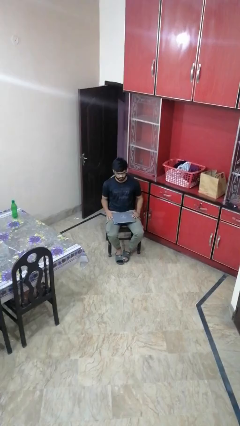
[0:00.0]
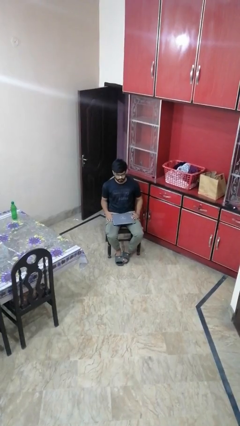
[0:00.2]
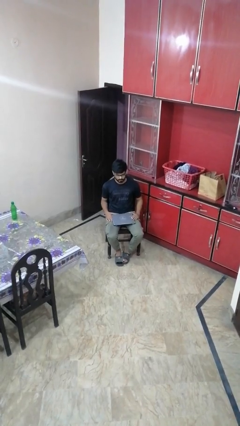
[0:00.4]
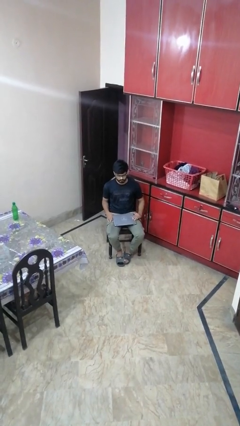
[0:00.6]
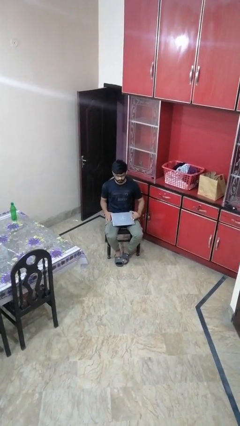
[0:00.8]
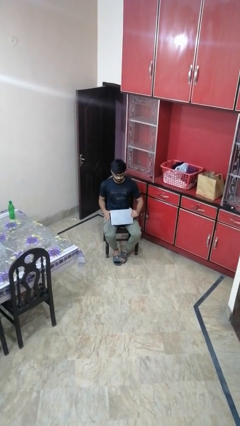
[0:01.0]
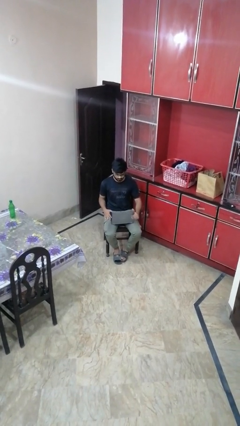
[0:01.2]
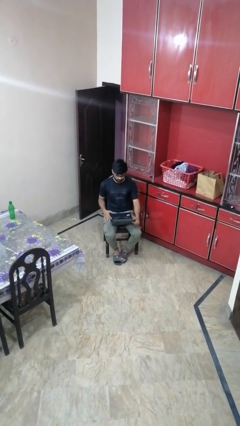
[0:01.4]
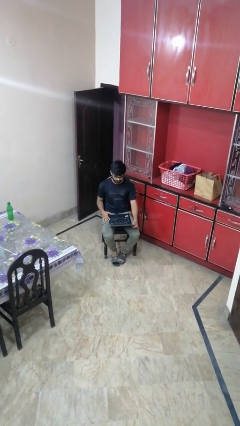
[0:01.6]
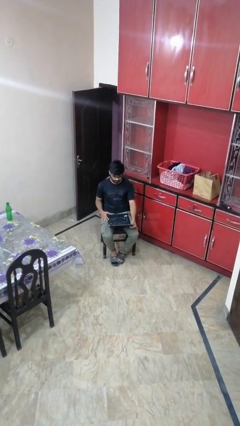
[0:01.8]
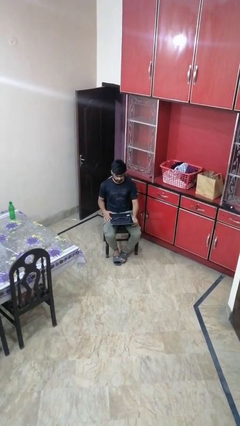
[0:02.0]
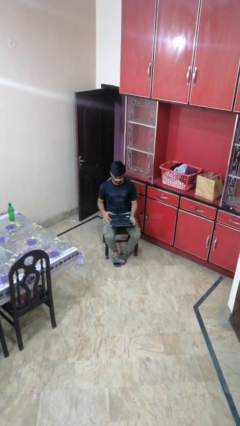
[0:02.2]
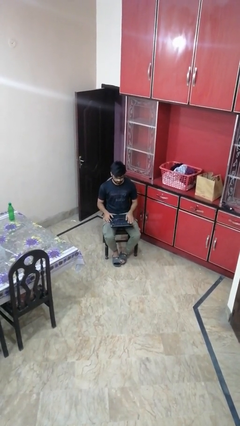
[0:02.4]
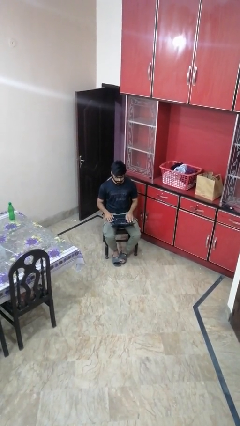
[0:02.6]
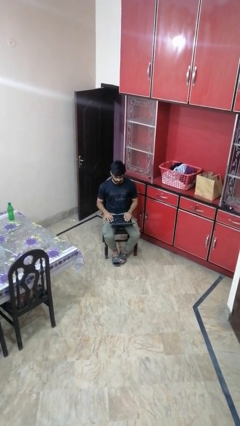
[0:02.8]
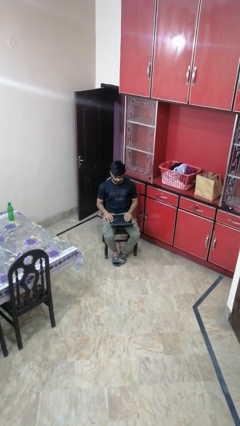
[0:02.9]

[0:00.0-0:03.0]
person opens laptop

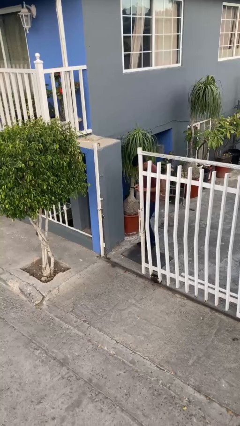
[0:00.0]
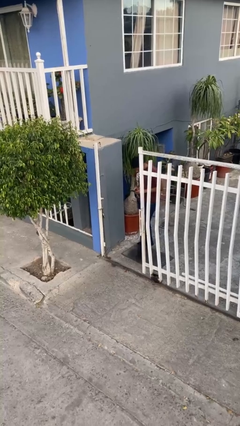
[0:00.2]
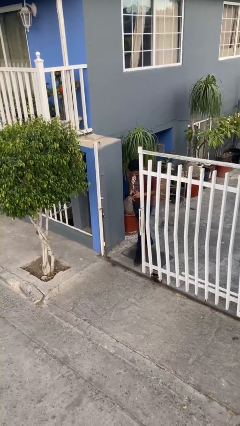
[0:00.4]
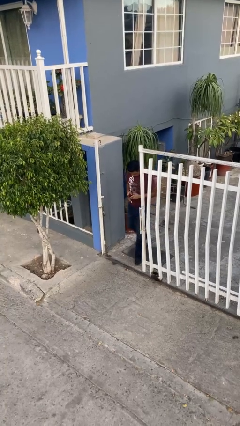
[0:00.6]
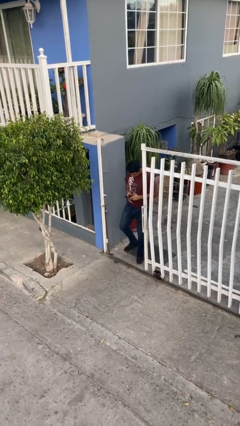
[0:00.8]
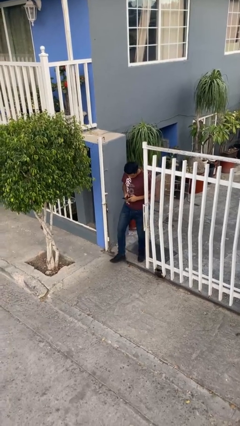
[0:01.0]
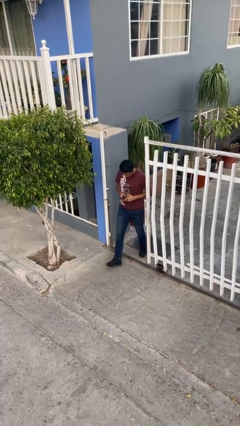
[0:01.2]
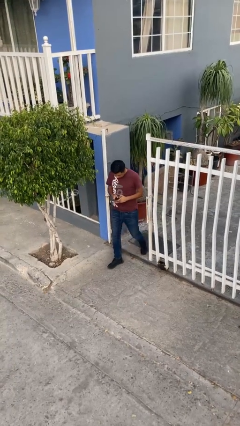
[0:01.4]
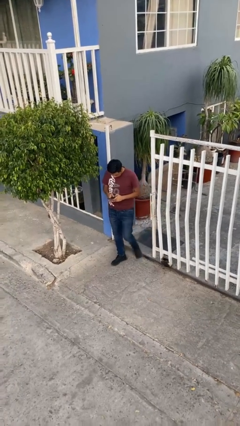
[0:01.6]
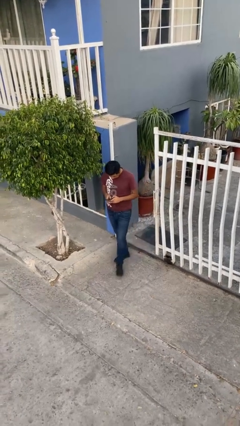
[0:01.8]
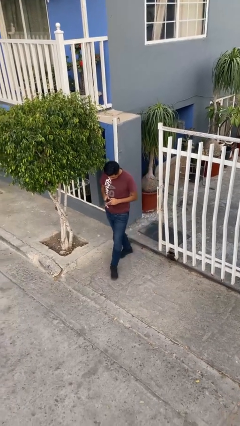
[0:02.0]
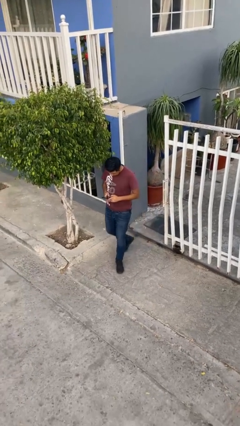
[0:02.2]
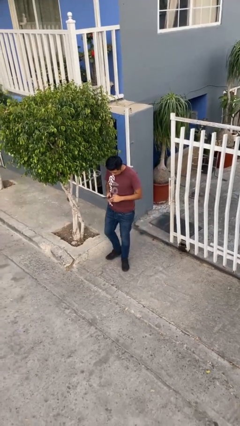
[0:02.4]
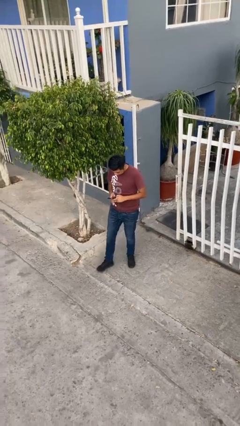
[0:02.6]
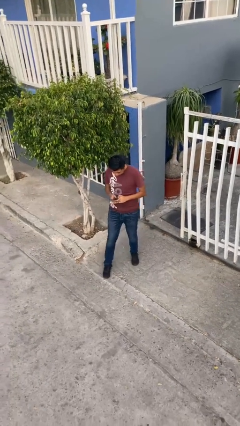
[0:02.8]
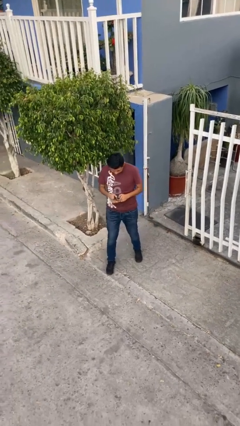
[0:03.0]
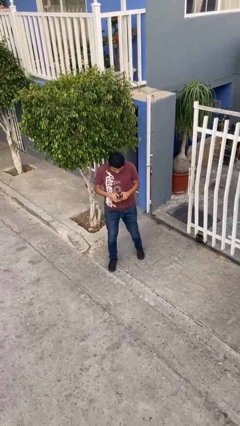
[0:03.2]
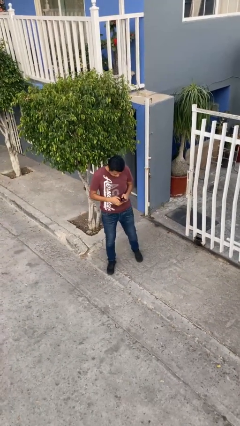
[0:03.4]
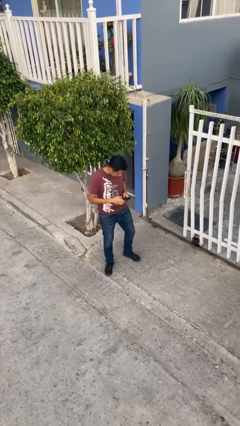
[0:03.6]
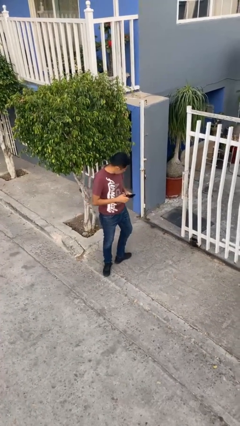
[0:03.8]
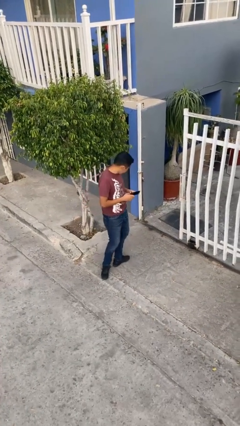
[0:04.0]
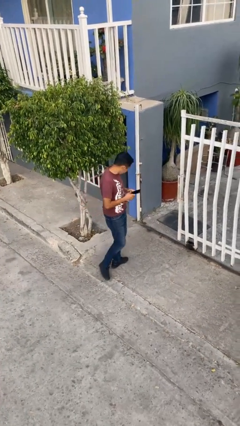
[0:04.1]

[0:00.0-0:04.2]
person enters scene through structure

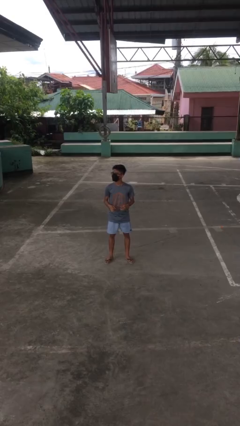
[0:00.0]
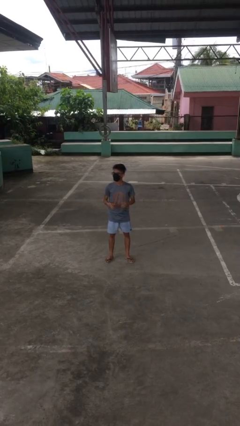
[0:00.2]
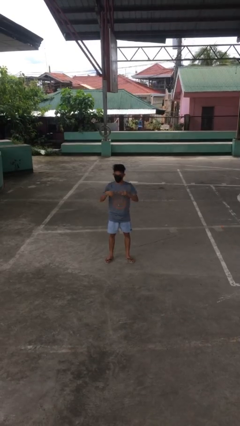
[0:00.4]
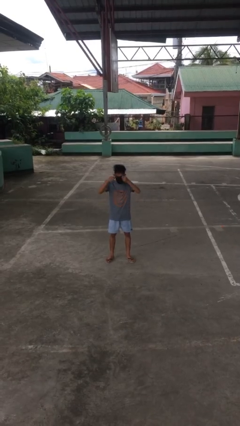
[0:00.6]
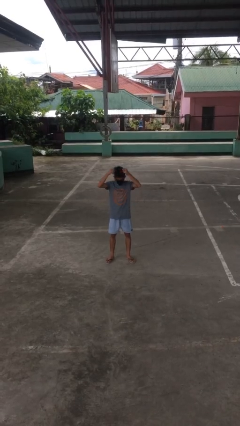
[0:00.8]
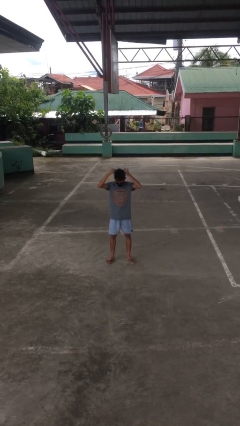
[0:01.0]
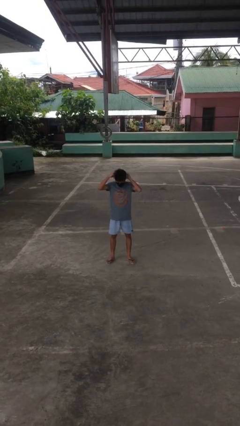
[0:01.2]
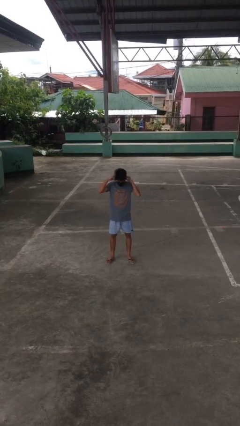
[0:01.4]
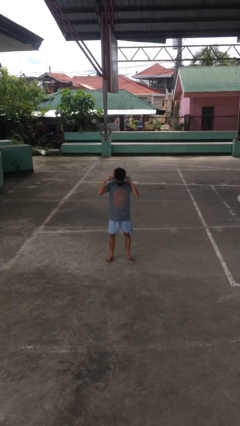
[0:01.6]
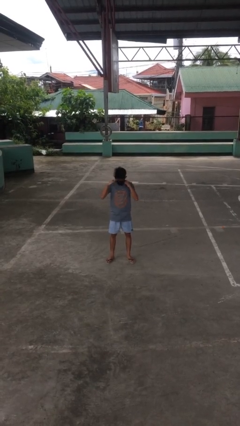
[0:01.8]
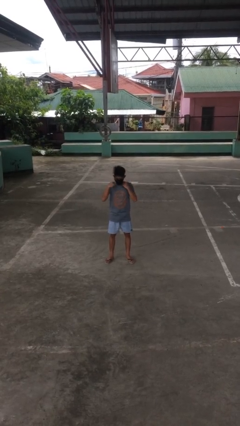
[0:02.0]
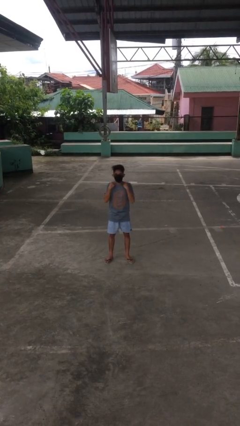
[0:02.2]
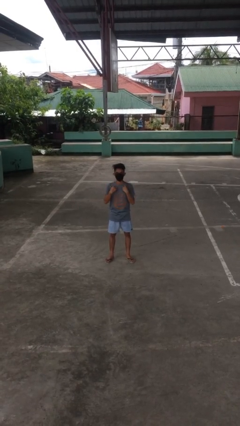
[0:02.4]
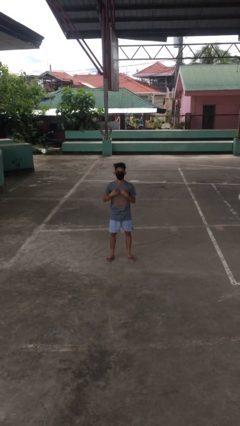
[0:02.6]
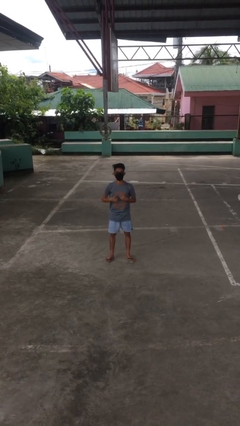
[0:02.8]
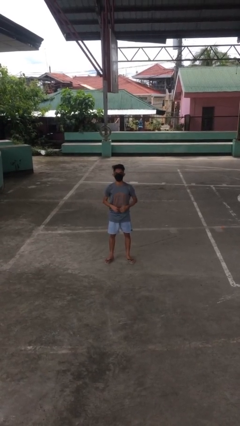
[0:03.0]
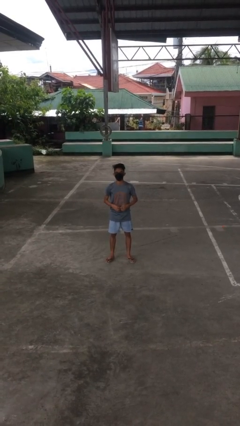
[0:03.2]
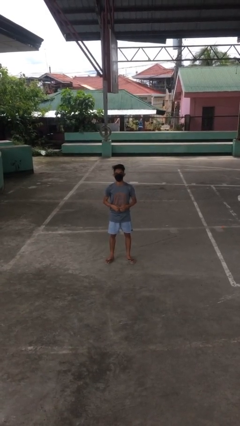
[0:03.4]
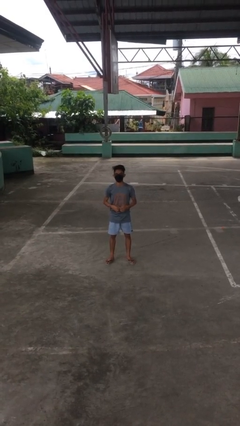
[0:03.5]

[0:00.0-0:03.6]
person puts on necklace

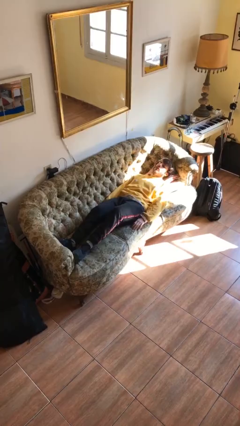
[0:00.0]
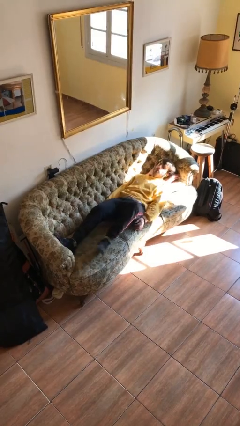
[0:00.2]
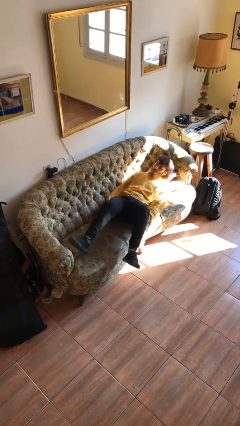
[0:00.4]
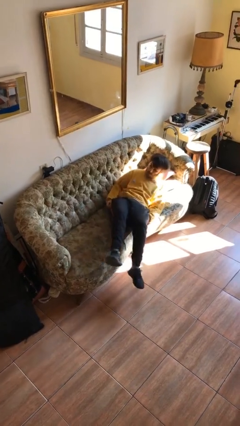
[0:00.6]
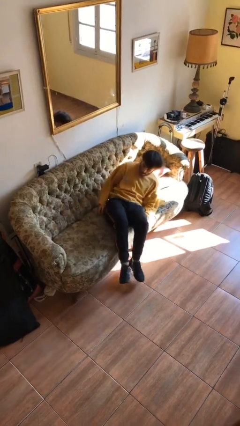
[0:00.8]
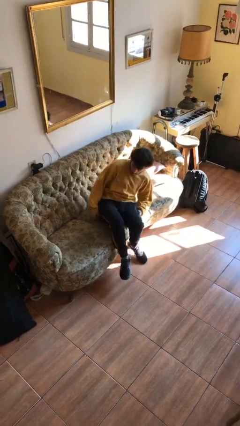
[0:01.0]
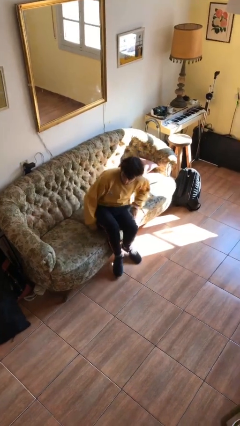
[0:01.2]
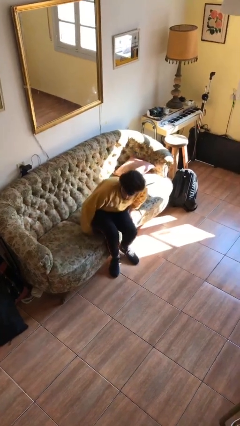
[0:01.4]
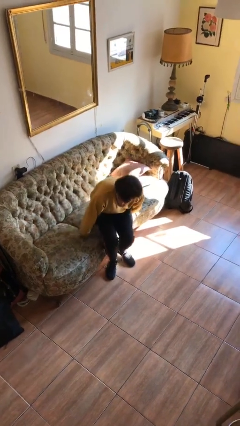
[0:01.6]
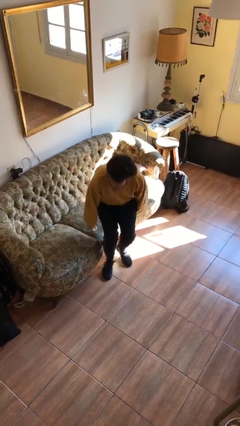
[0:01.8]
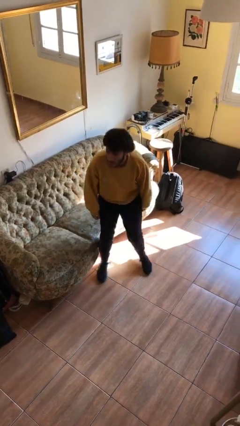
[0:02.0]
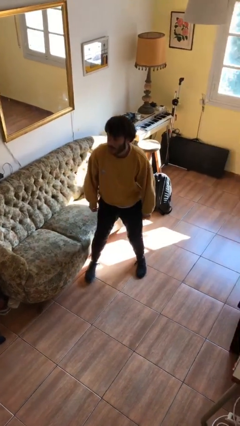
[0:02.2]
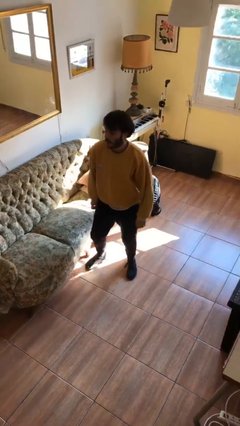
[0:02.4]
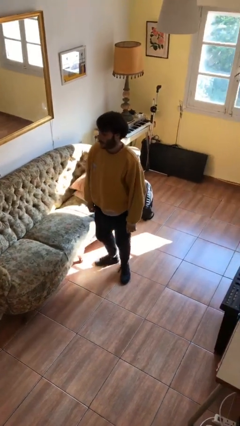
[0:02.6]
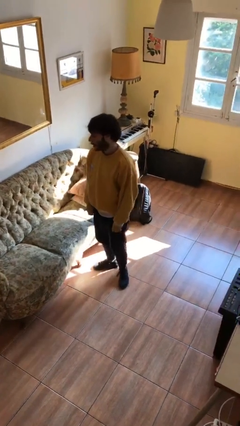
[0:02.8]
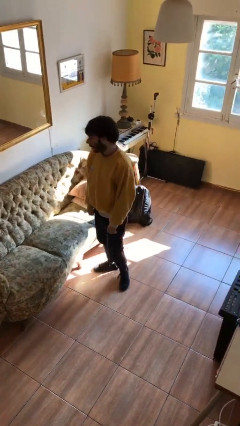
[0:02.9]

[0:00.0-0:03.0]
person stands up

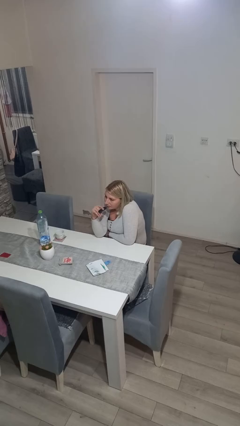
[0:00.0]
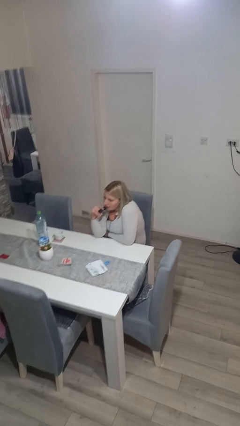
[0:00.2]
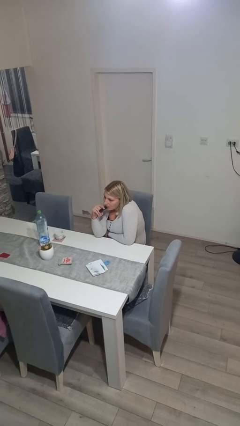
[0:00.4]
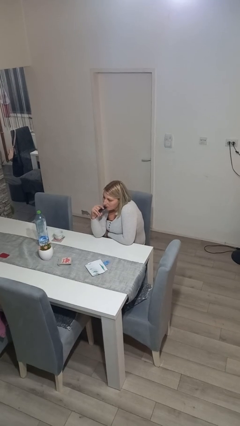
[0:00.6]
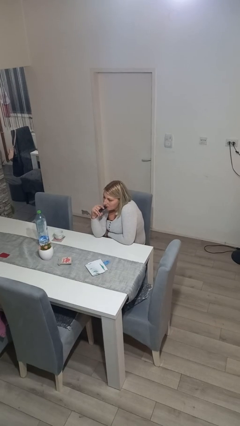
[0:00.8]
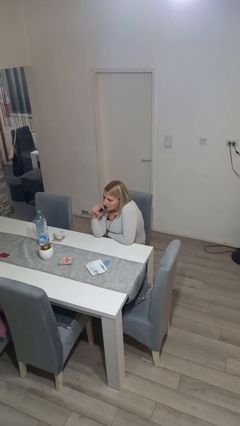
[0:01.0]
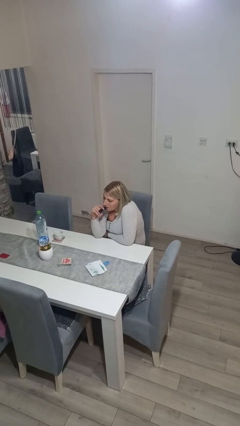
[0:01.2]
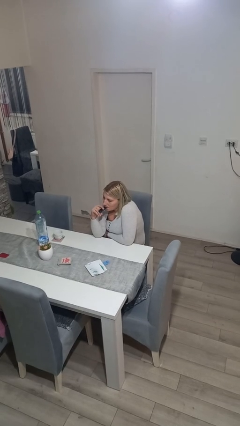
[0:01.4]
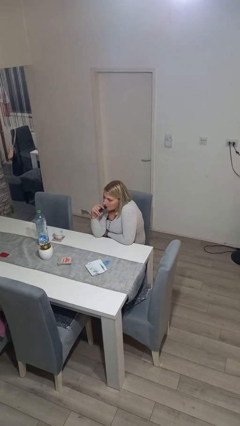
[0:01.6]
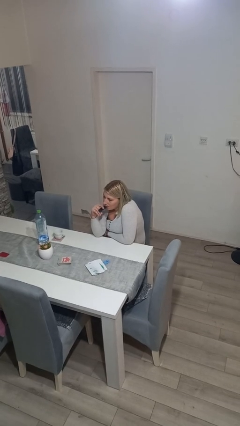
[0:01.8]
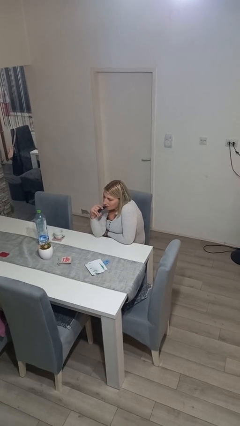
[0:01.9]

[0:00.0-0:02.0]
person vapes

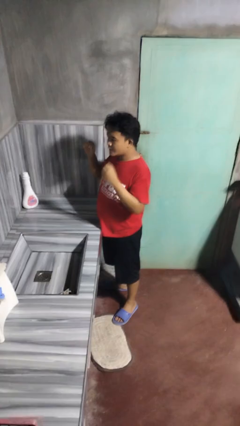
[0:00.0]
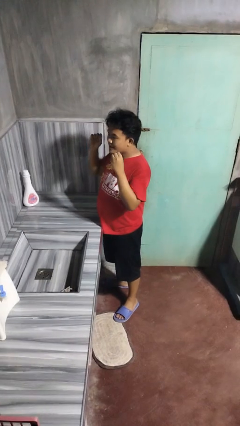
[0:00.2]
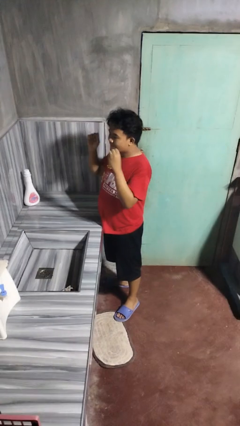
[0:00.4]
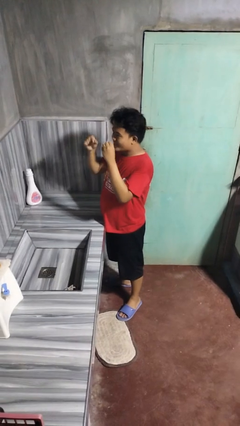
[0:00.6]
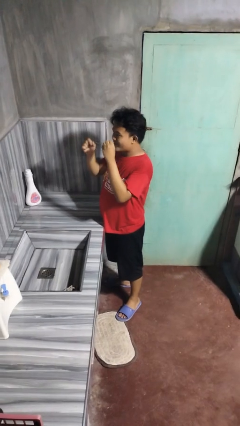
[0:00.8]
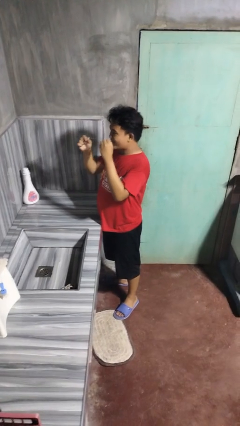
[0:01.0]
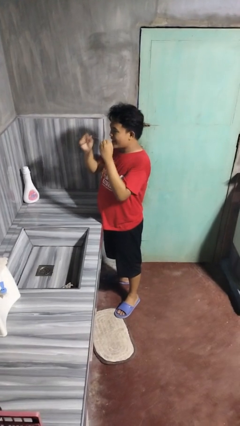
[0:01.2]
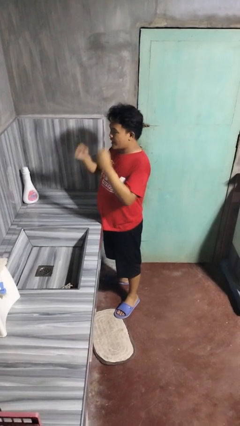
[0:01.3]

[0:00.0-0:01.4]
person flosses

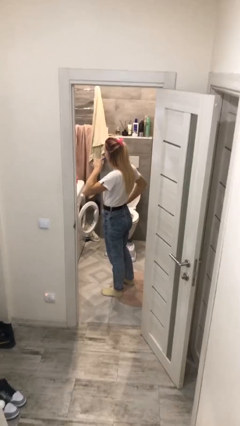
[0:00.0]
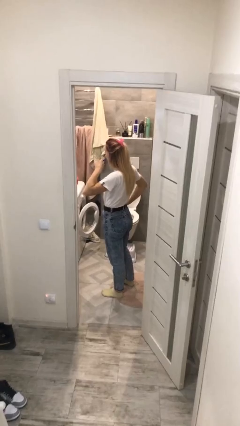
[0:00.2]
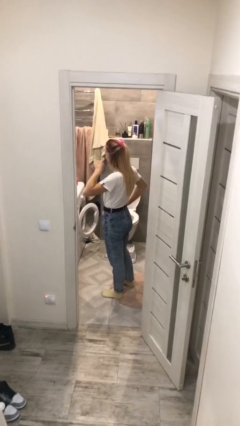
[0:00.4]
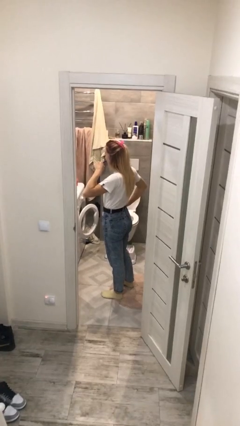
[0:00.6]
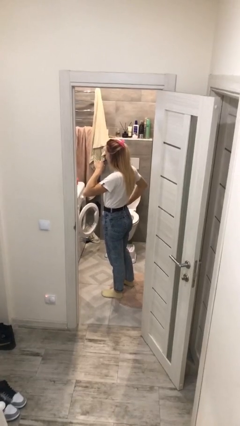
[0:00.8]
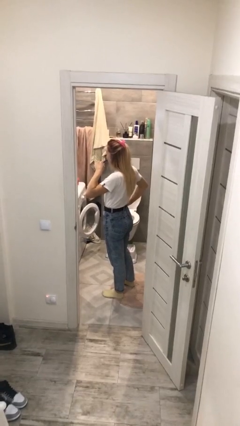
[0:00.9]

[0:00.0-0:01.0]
person brushes teeth
